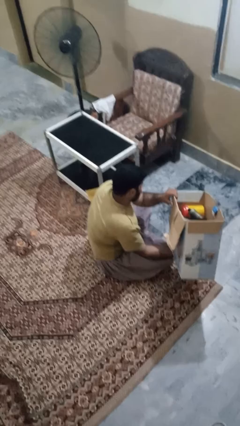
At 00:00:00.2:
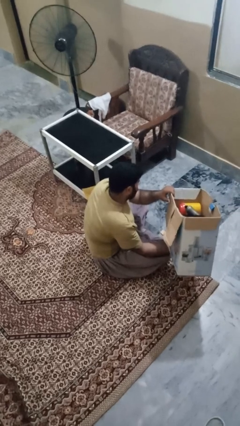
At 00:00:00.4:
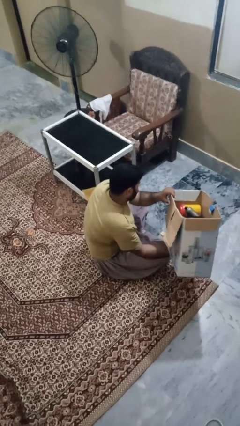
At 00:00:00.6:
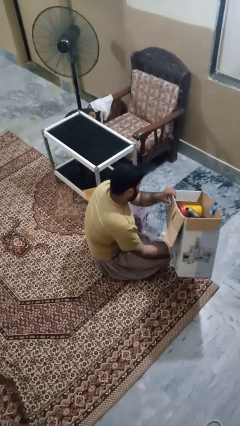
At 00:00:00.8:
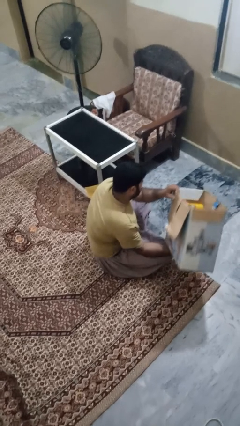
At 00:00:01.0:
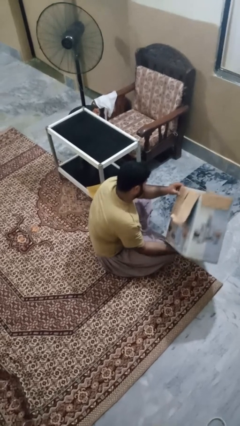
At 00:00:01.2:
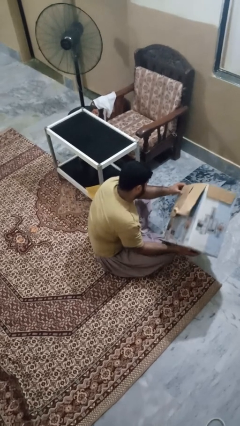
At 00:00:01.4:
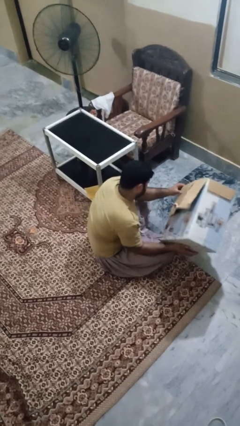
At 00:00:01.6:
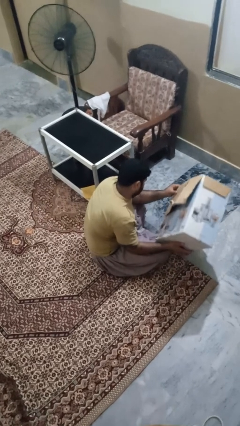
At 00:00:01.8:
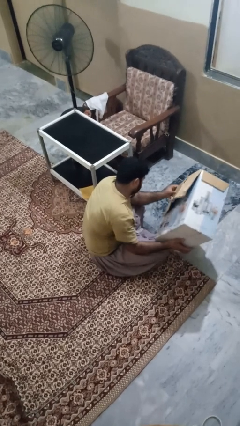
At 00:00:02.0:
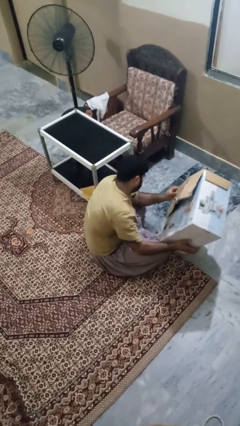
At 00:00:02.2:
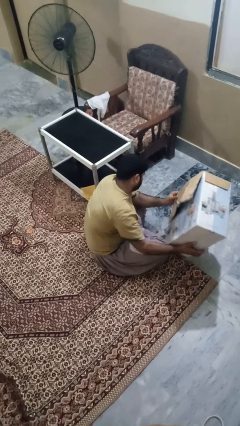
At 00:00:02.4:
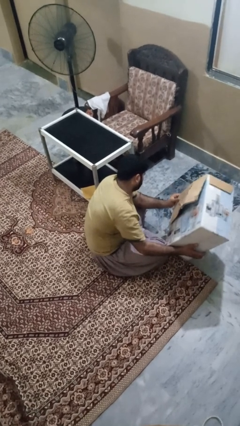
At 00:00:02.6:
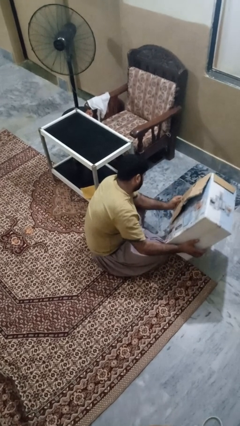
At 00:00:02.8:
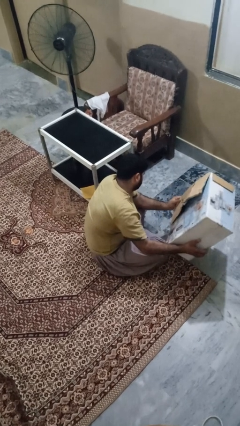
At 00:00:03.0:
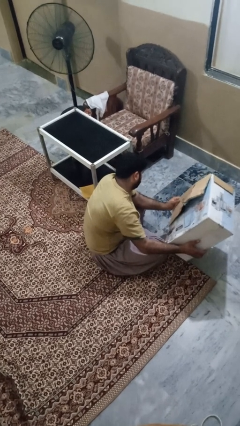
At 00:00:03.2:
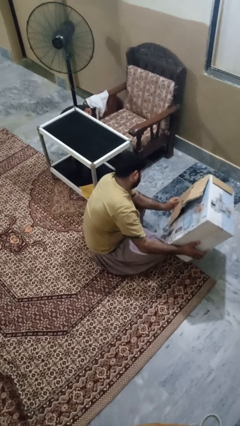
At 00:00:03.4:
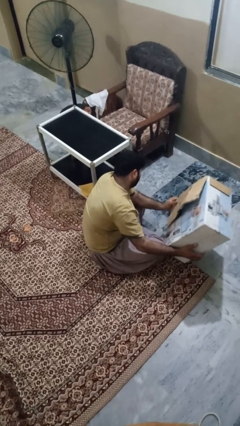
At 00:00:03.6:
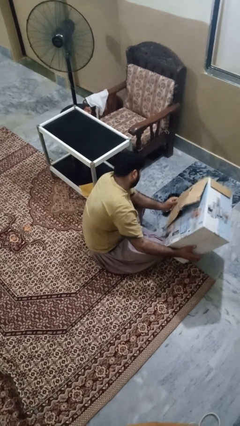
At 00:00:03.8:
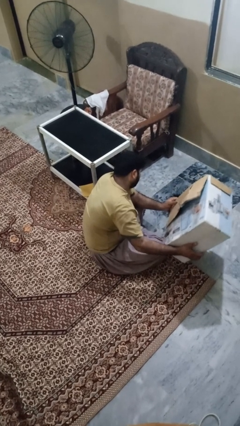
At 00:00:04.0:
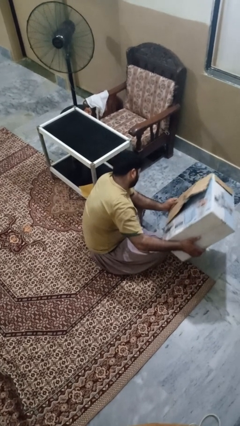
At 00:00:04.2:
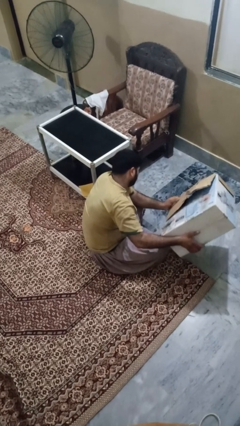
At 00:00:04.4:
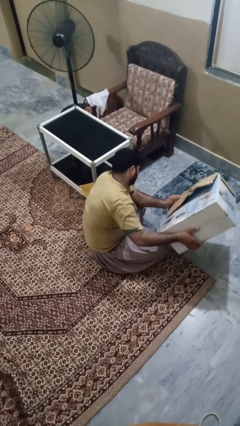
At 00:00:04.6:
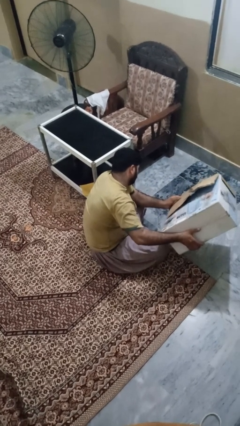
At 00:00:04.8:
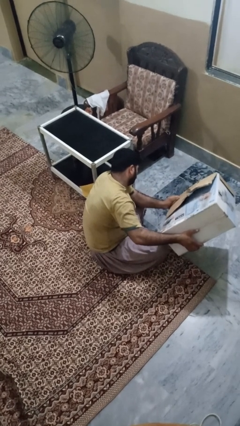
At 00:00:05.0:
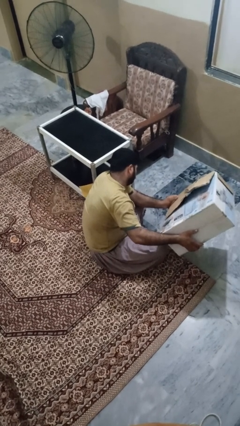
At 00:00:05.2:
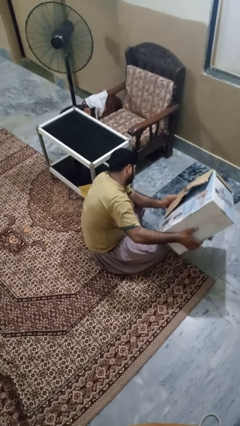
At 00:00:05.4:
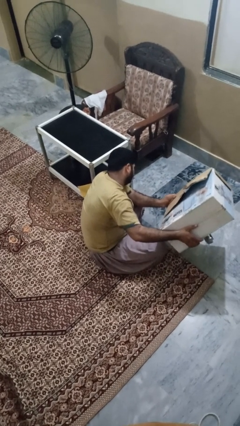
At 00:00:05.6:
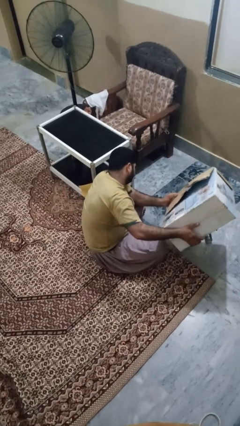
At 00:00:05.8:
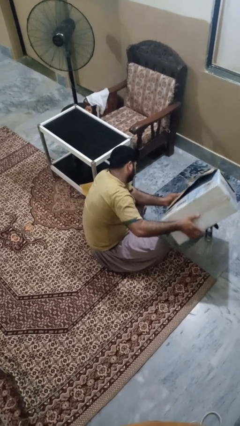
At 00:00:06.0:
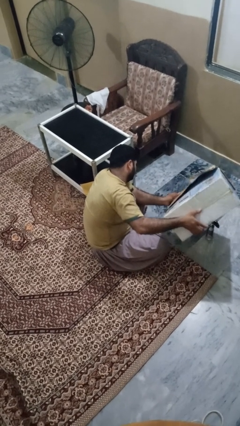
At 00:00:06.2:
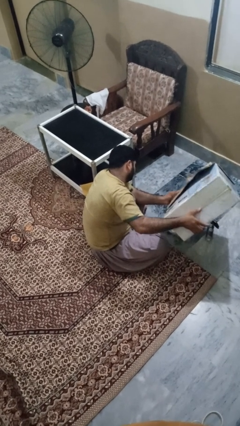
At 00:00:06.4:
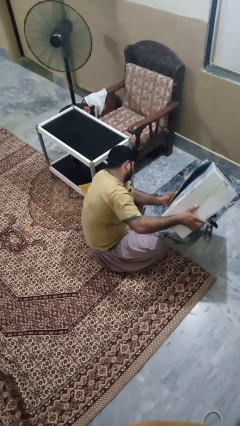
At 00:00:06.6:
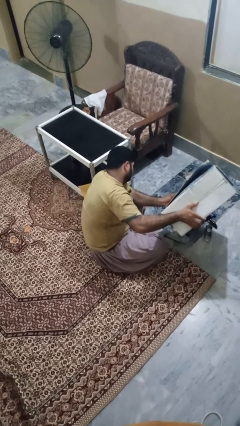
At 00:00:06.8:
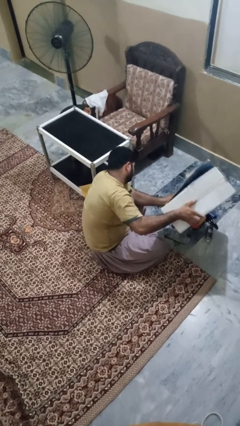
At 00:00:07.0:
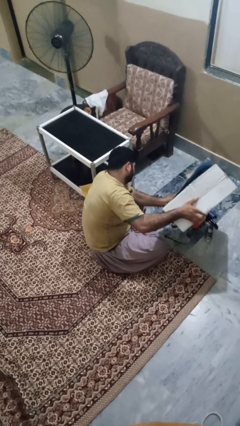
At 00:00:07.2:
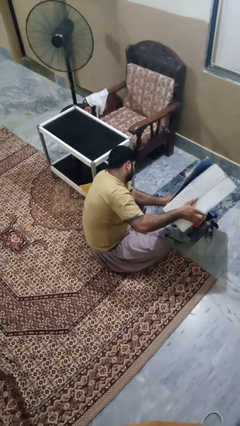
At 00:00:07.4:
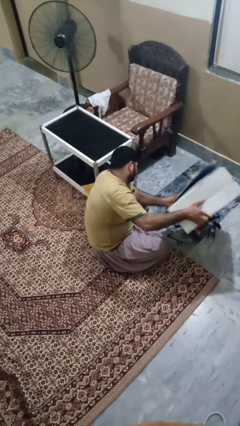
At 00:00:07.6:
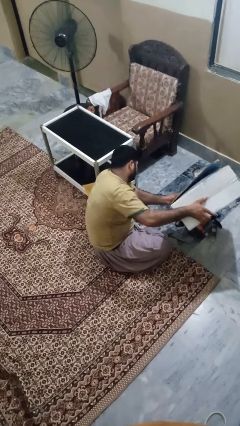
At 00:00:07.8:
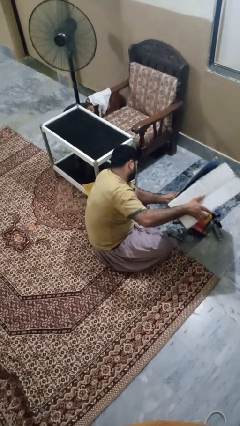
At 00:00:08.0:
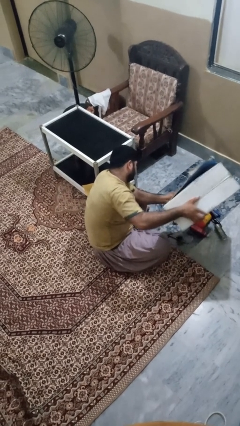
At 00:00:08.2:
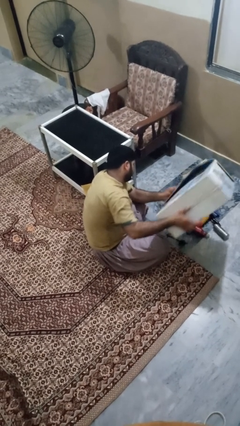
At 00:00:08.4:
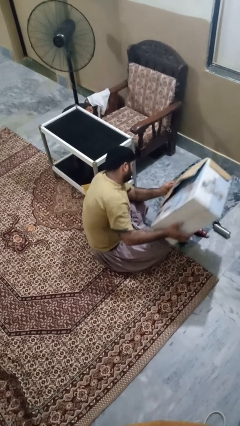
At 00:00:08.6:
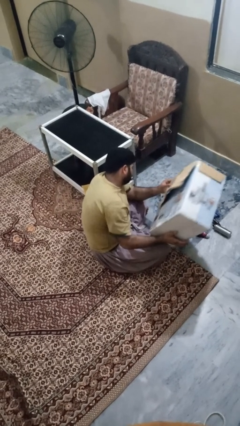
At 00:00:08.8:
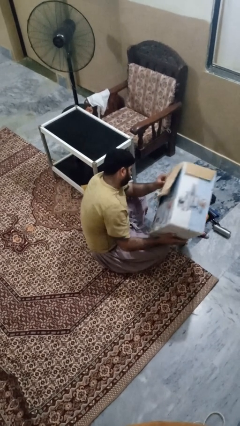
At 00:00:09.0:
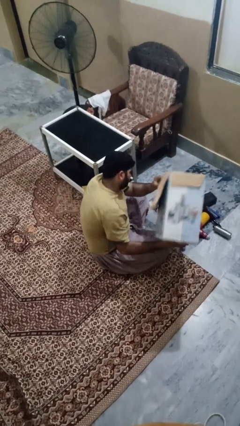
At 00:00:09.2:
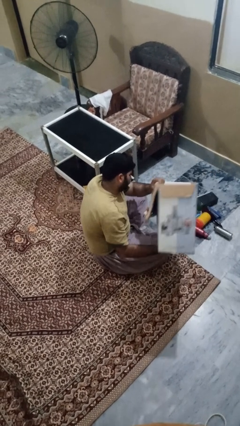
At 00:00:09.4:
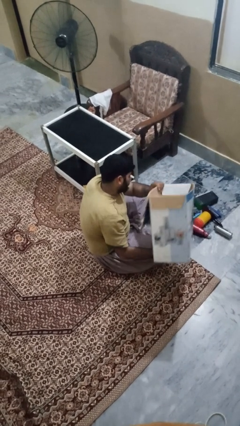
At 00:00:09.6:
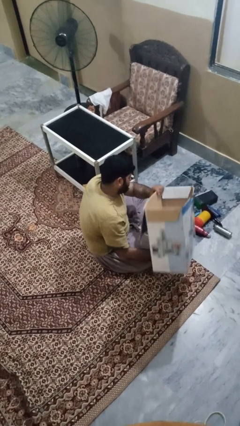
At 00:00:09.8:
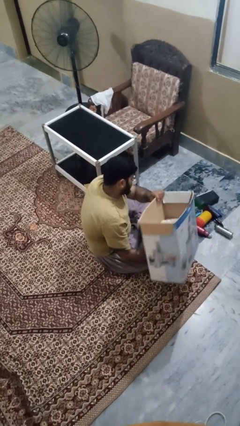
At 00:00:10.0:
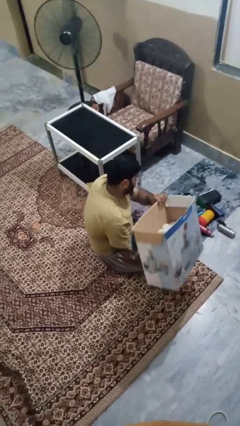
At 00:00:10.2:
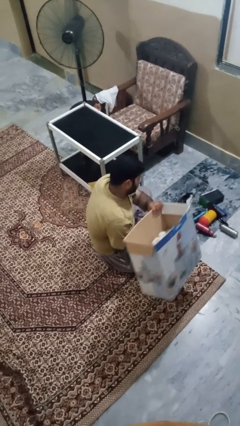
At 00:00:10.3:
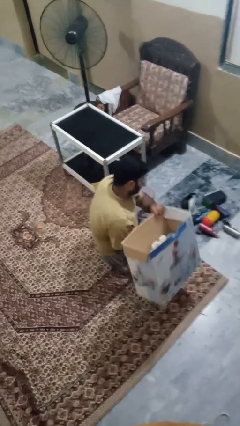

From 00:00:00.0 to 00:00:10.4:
person unloads box onto floor

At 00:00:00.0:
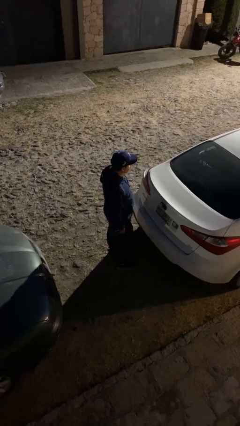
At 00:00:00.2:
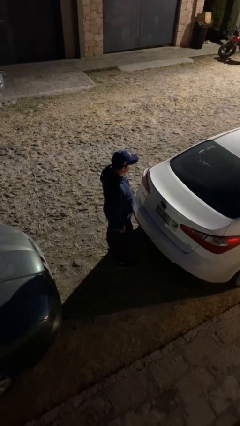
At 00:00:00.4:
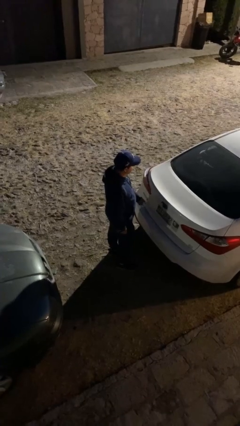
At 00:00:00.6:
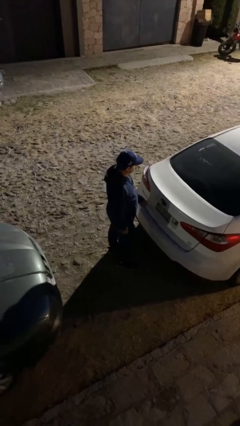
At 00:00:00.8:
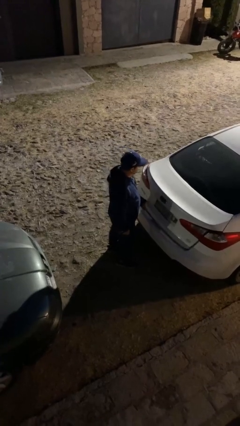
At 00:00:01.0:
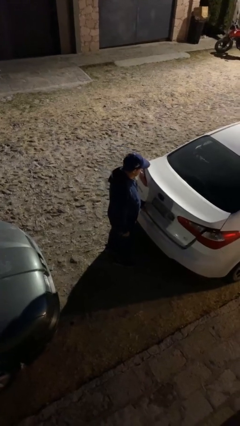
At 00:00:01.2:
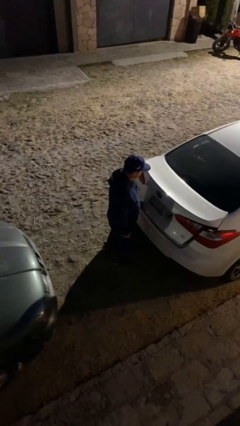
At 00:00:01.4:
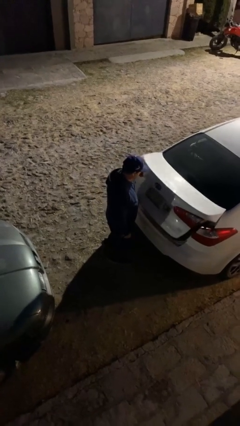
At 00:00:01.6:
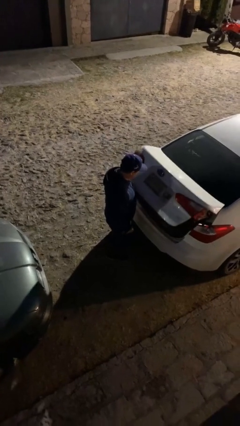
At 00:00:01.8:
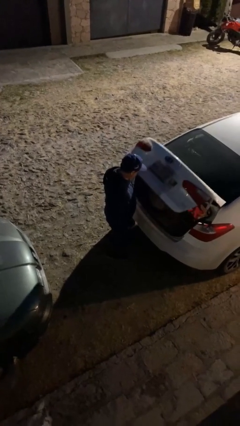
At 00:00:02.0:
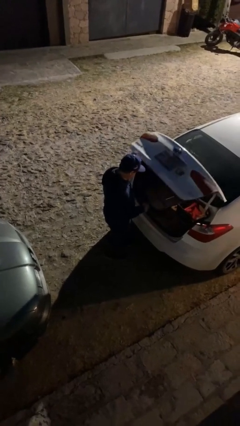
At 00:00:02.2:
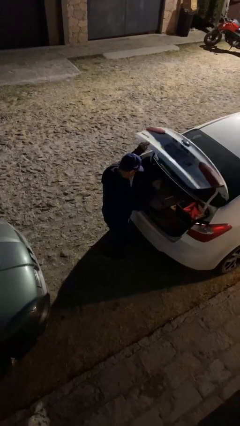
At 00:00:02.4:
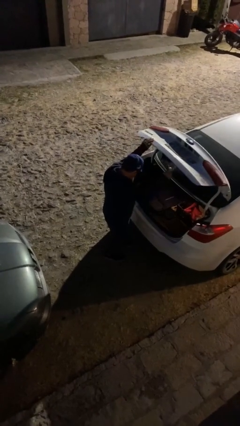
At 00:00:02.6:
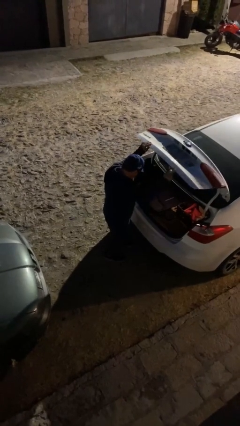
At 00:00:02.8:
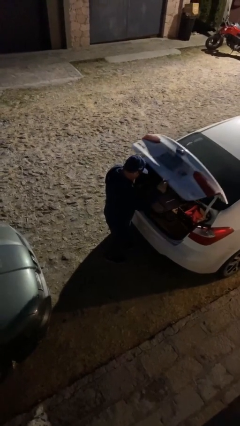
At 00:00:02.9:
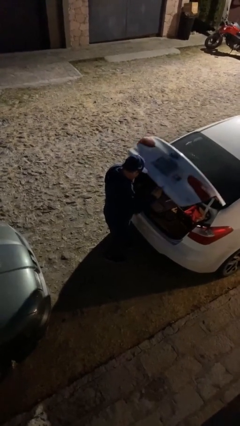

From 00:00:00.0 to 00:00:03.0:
person opens car trunk

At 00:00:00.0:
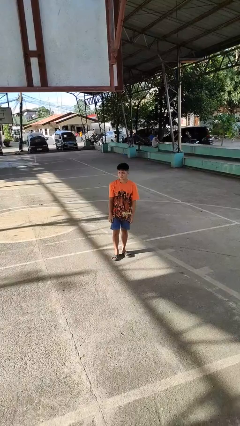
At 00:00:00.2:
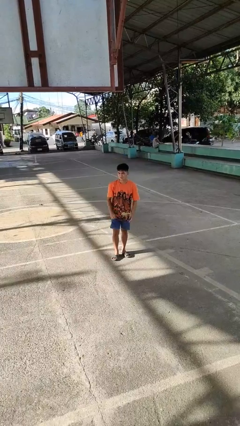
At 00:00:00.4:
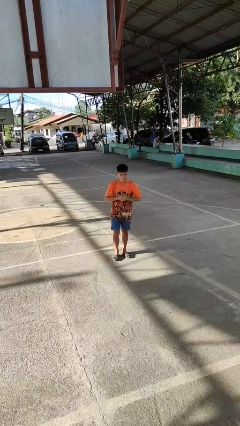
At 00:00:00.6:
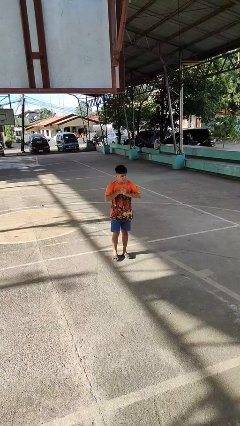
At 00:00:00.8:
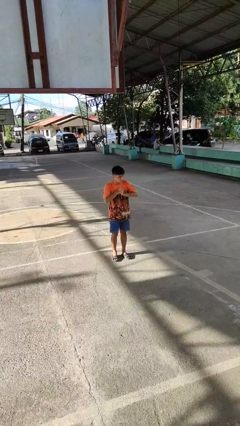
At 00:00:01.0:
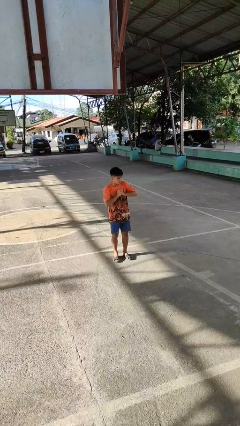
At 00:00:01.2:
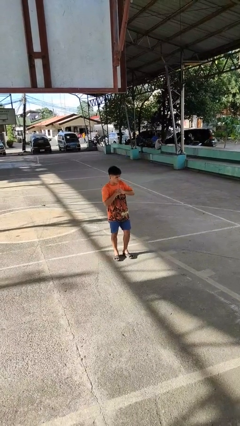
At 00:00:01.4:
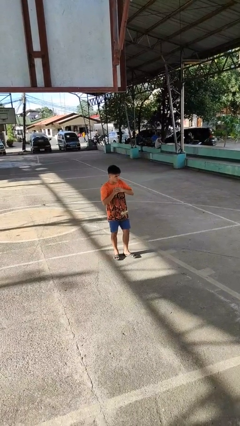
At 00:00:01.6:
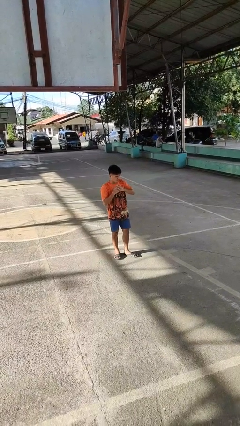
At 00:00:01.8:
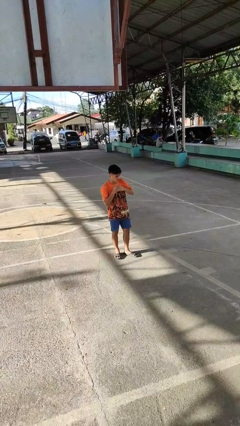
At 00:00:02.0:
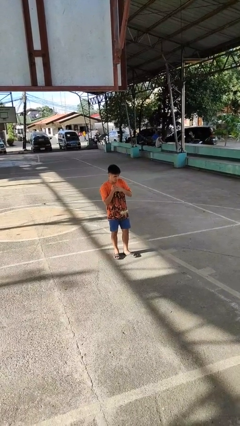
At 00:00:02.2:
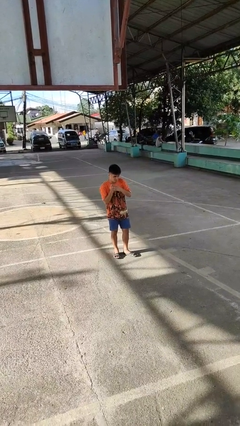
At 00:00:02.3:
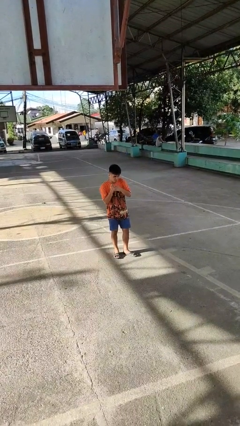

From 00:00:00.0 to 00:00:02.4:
person cracks knuckles

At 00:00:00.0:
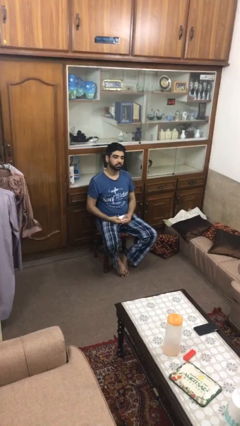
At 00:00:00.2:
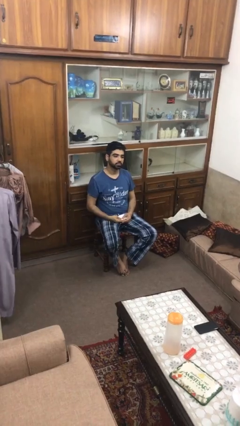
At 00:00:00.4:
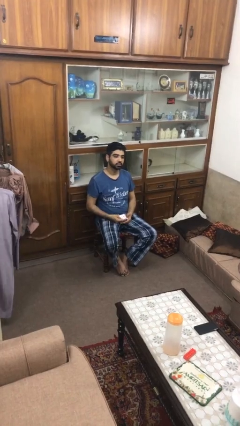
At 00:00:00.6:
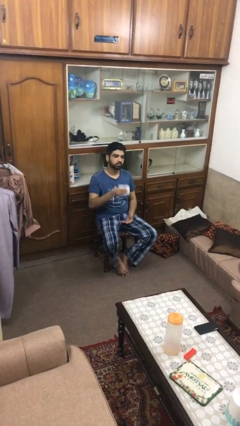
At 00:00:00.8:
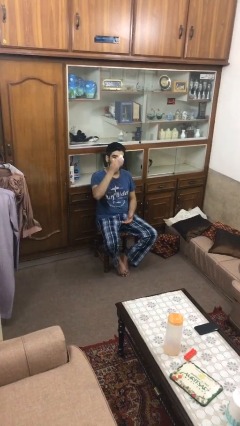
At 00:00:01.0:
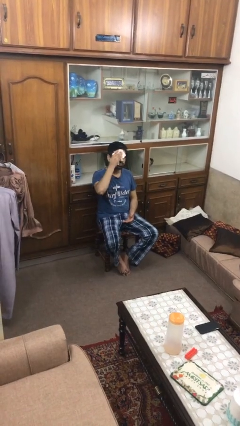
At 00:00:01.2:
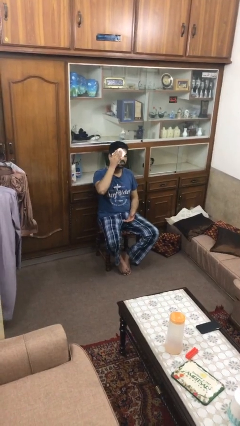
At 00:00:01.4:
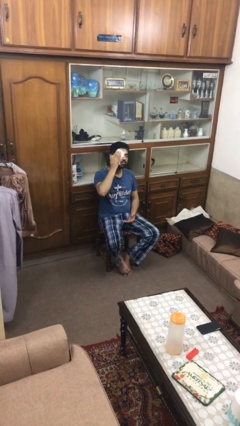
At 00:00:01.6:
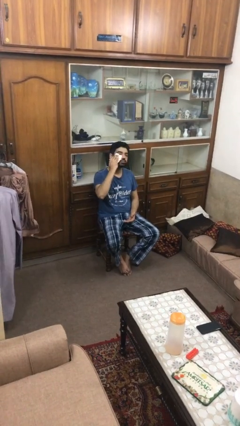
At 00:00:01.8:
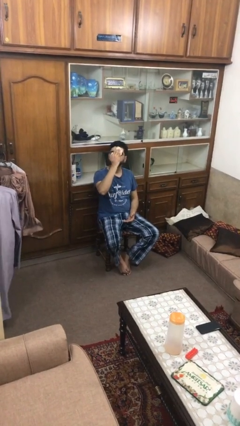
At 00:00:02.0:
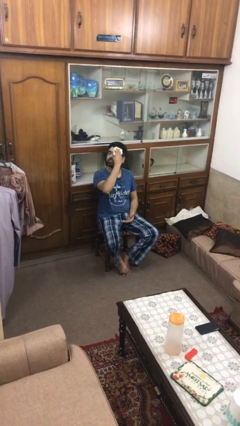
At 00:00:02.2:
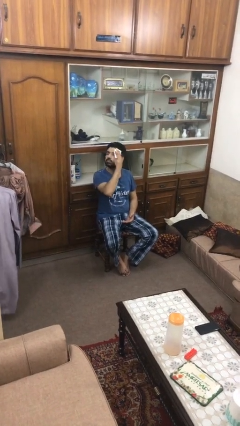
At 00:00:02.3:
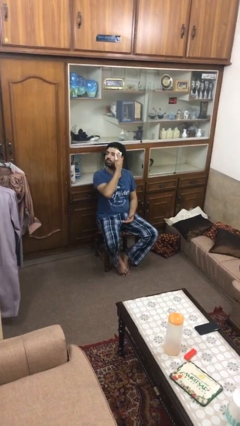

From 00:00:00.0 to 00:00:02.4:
person wipes mouth with napkin
